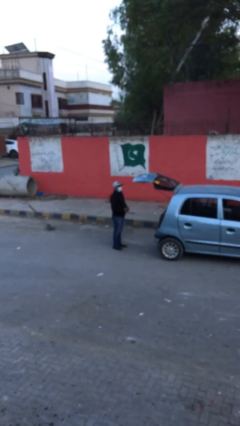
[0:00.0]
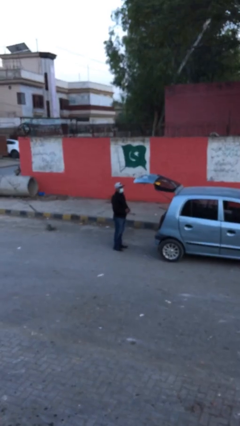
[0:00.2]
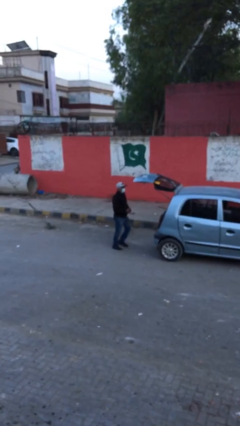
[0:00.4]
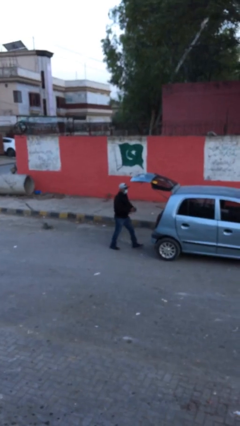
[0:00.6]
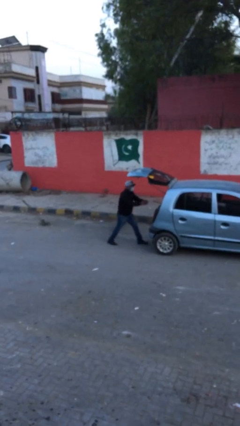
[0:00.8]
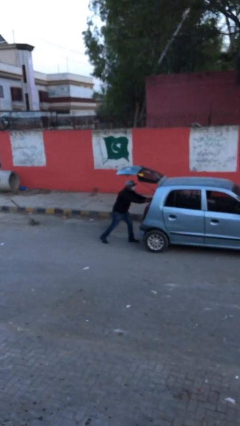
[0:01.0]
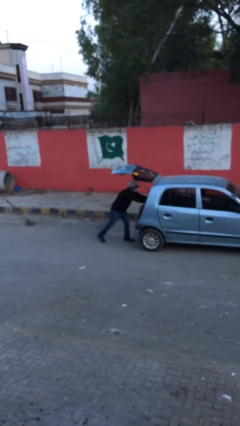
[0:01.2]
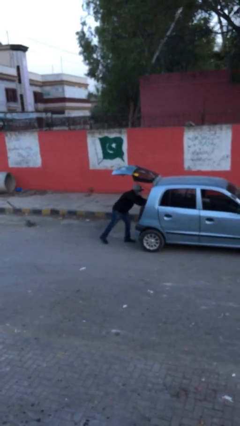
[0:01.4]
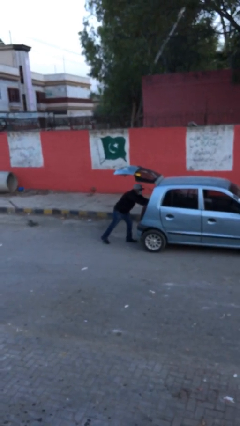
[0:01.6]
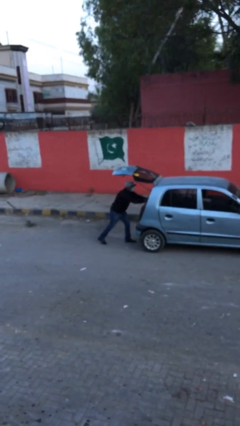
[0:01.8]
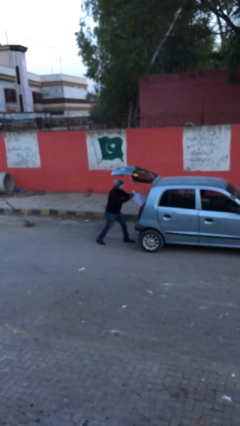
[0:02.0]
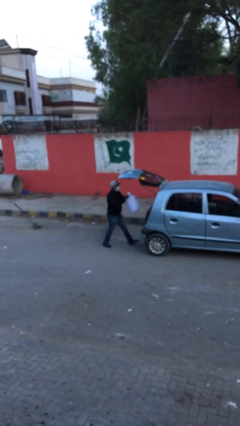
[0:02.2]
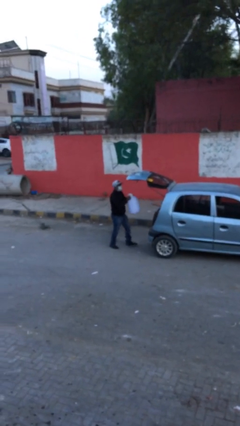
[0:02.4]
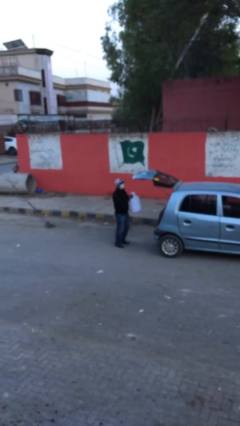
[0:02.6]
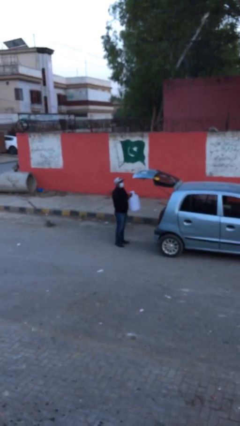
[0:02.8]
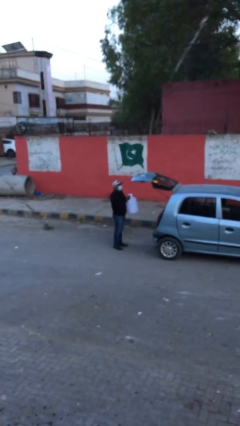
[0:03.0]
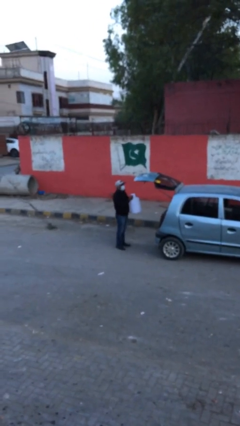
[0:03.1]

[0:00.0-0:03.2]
person unloads car

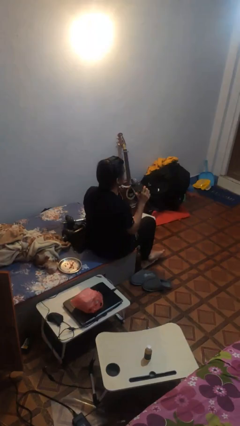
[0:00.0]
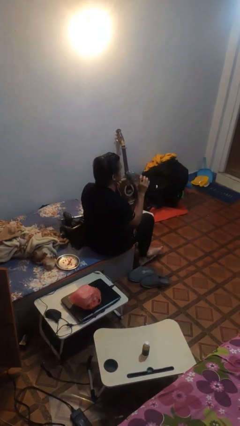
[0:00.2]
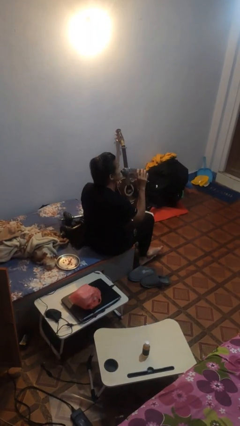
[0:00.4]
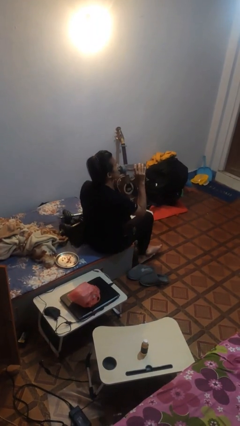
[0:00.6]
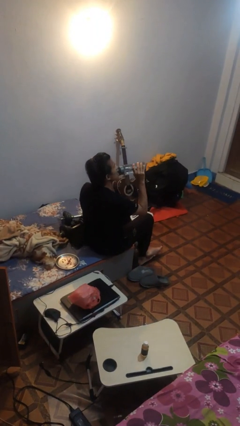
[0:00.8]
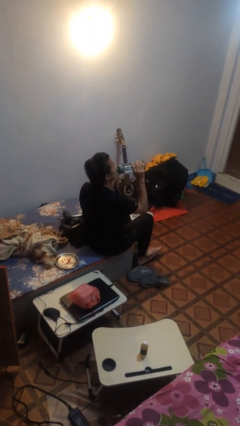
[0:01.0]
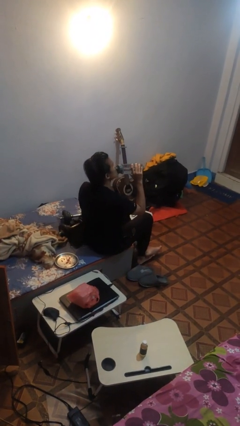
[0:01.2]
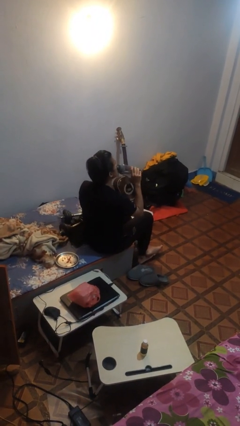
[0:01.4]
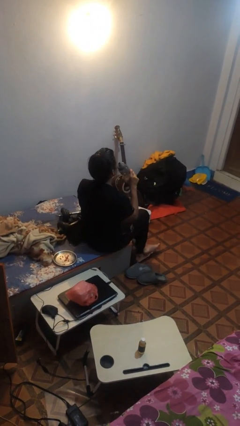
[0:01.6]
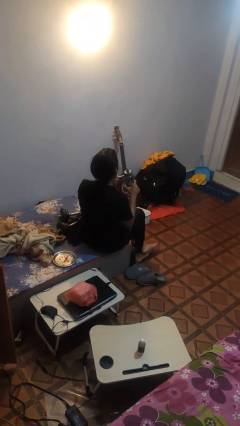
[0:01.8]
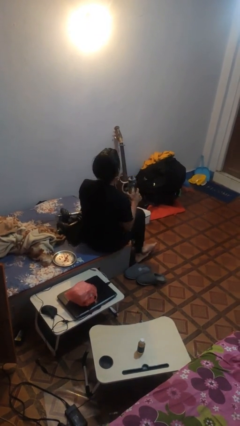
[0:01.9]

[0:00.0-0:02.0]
person drinks from bottle

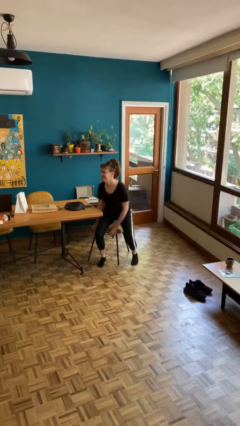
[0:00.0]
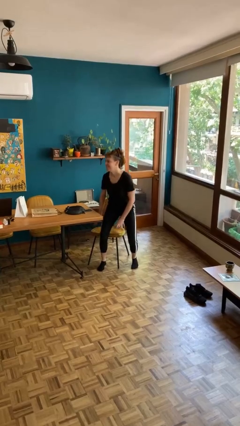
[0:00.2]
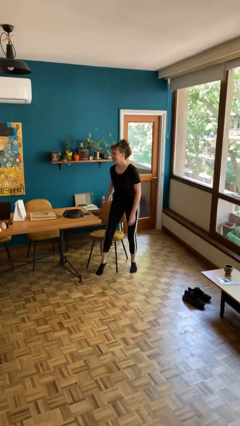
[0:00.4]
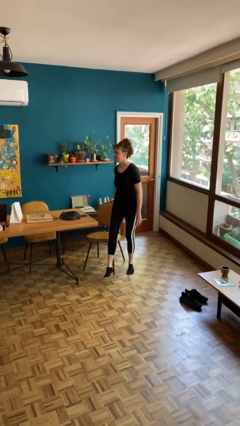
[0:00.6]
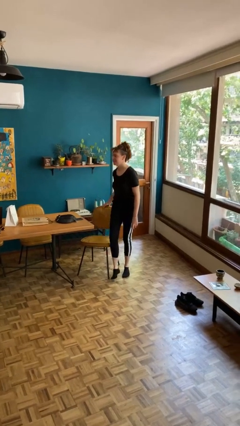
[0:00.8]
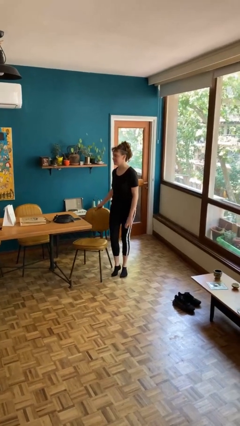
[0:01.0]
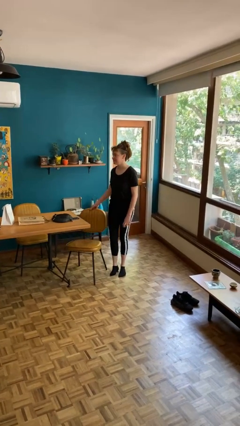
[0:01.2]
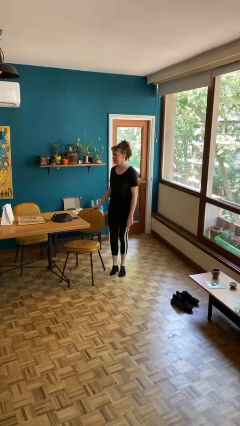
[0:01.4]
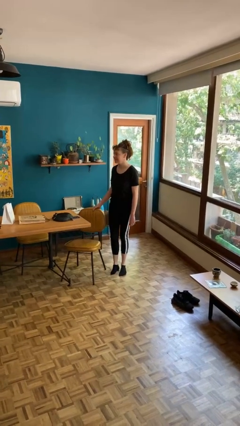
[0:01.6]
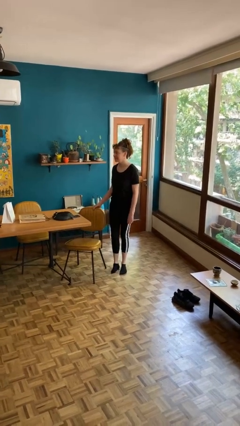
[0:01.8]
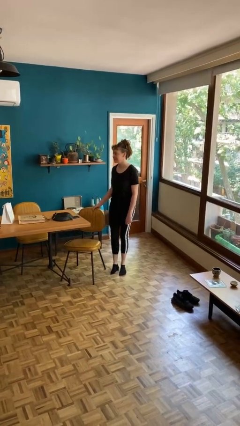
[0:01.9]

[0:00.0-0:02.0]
person stands up

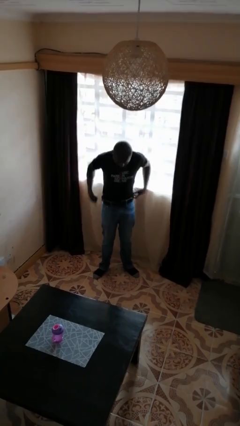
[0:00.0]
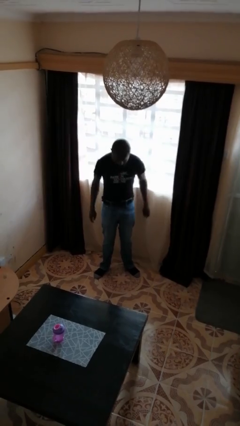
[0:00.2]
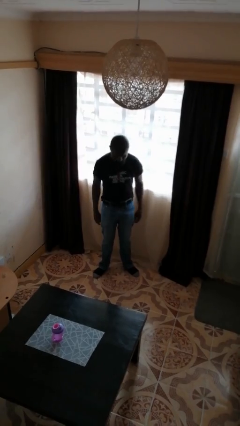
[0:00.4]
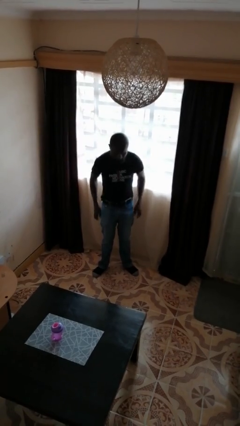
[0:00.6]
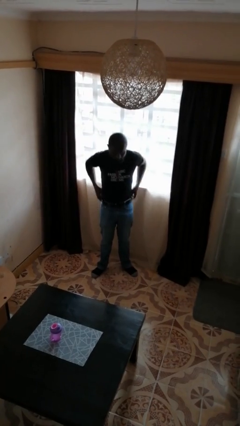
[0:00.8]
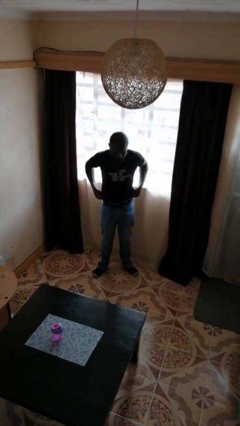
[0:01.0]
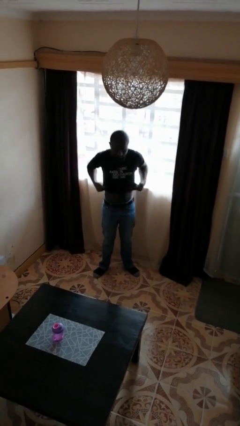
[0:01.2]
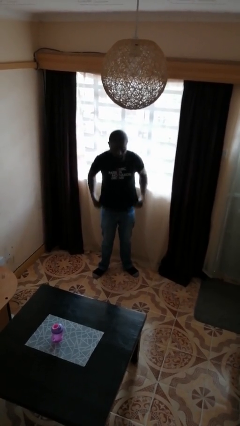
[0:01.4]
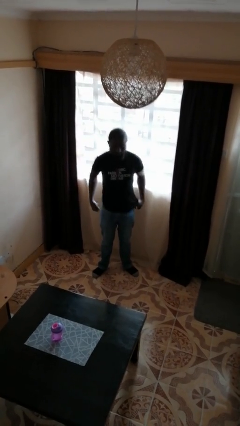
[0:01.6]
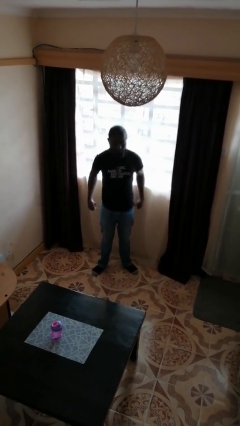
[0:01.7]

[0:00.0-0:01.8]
person untucks shirt

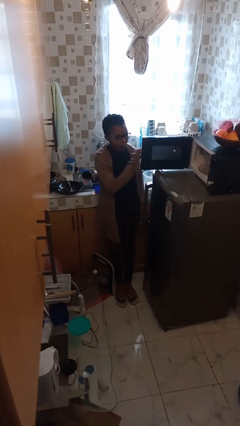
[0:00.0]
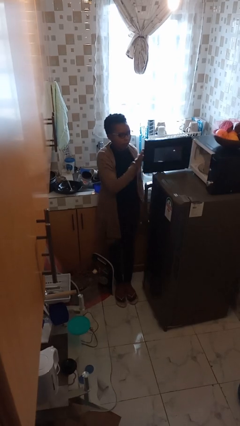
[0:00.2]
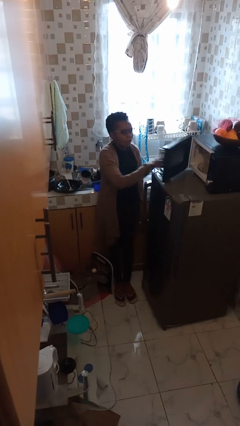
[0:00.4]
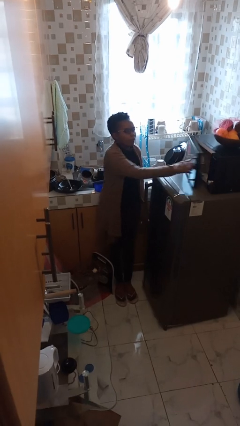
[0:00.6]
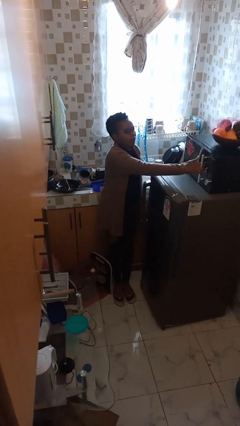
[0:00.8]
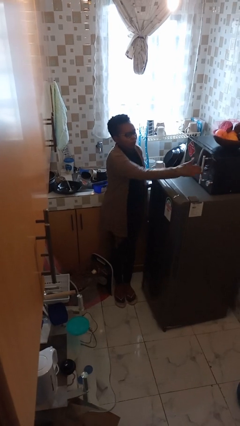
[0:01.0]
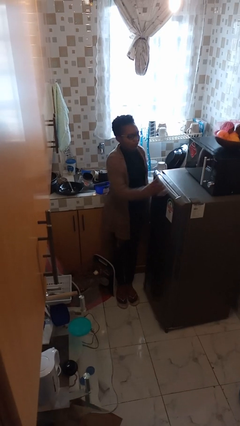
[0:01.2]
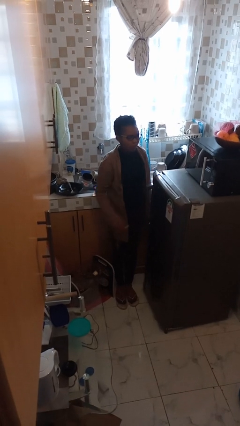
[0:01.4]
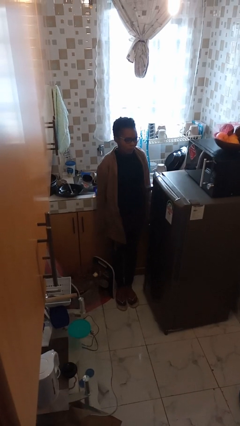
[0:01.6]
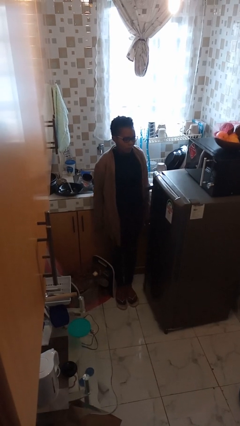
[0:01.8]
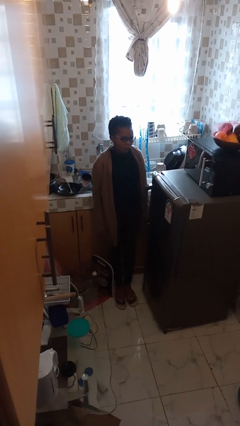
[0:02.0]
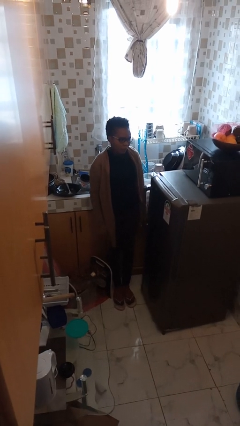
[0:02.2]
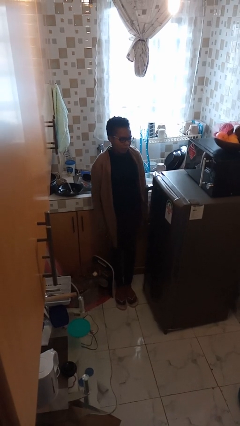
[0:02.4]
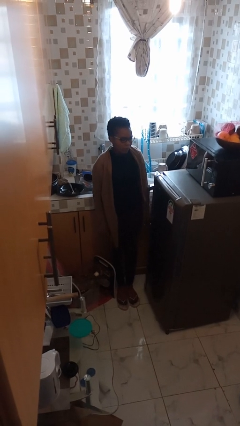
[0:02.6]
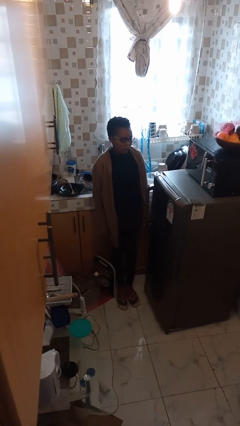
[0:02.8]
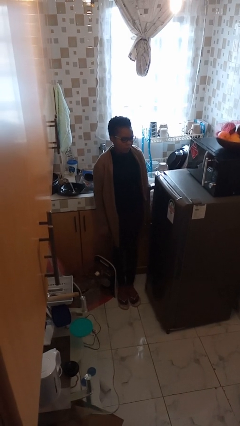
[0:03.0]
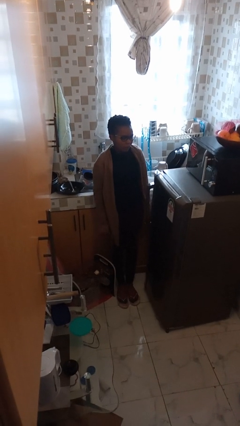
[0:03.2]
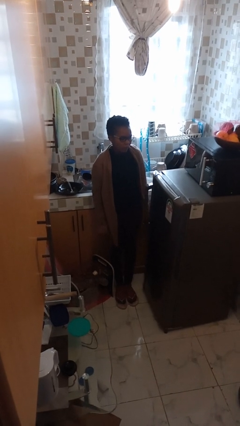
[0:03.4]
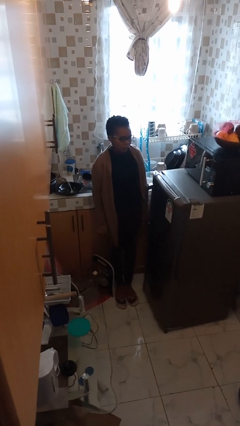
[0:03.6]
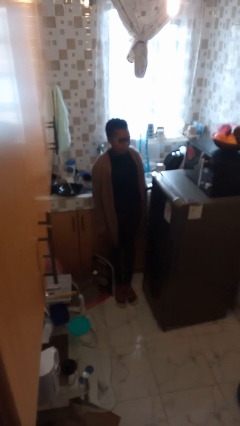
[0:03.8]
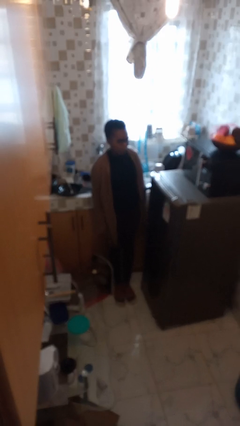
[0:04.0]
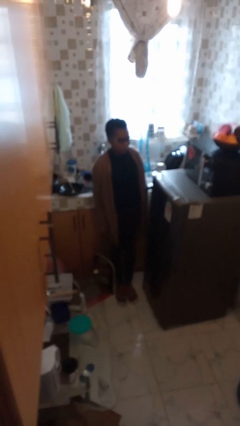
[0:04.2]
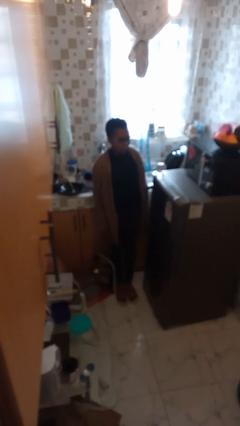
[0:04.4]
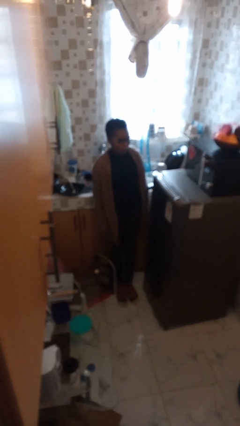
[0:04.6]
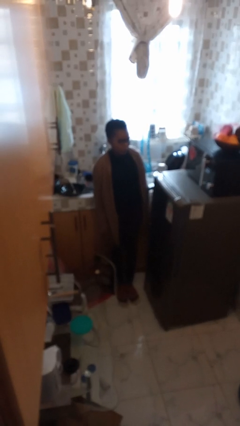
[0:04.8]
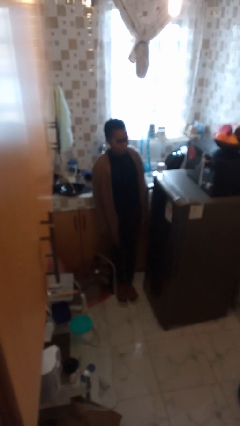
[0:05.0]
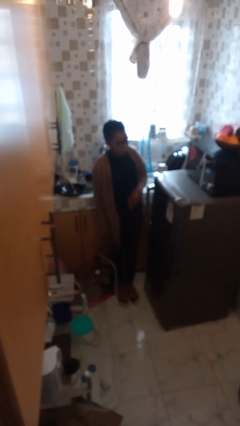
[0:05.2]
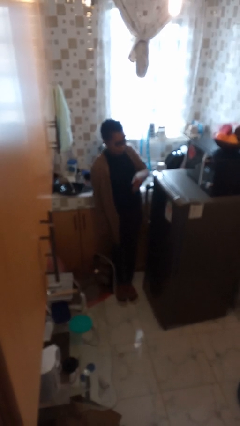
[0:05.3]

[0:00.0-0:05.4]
person closes microwave

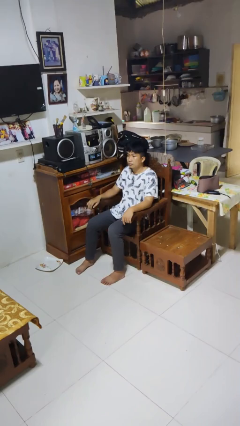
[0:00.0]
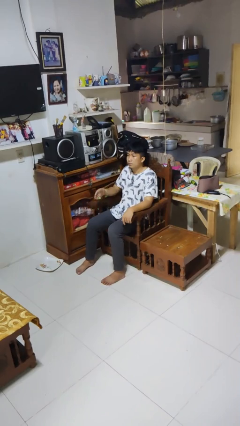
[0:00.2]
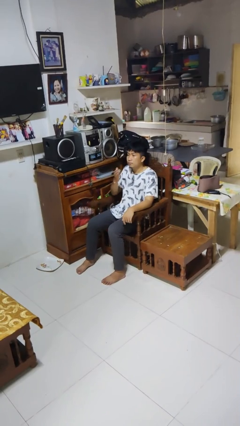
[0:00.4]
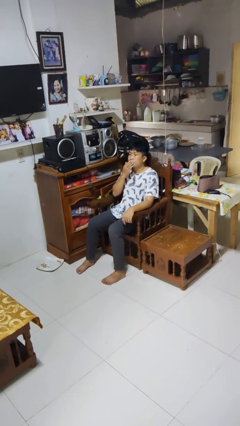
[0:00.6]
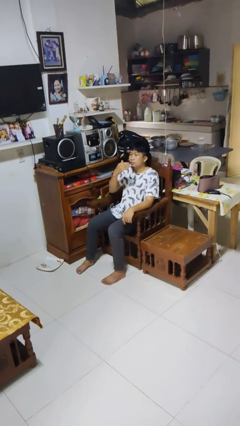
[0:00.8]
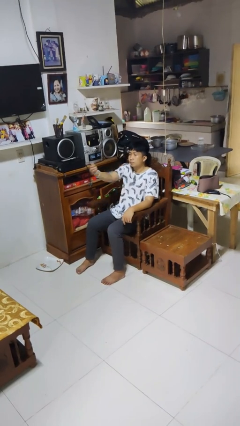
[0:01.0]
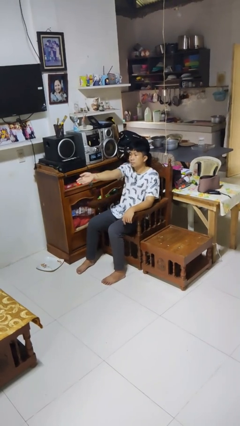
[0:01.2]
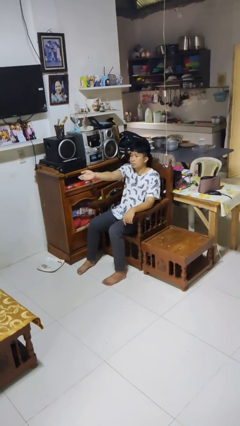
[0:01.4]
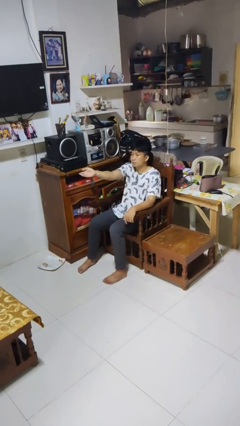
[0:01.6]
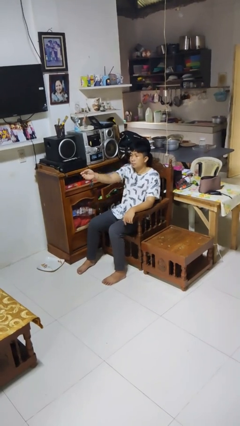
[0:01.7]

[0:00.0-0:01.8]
person gestures blow kiss

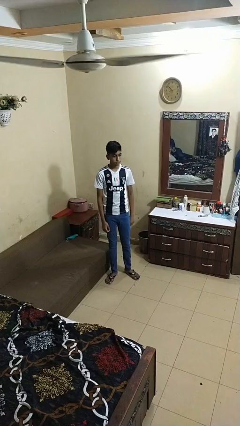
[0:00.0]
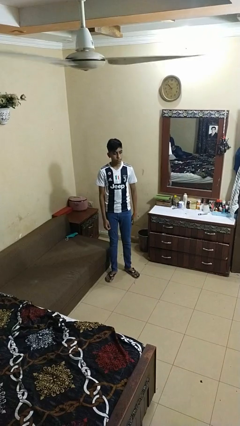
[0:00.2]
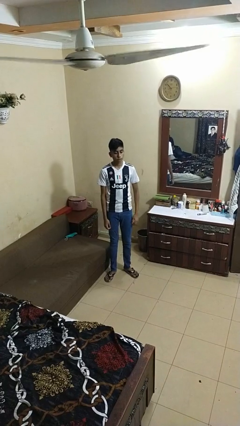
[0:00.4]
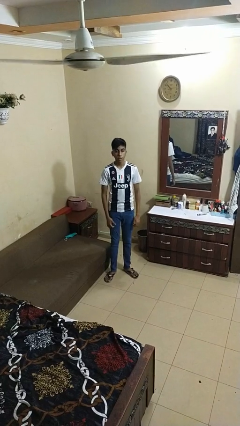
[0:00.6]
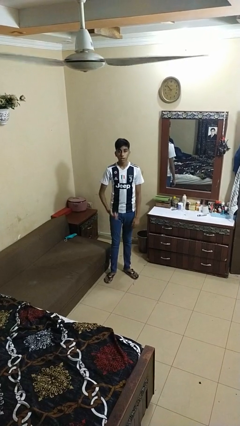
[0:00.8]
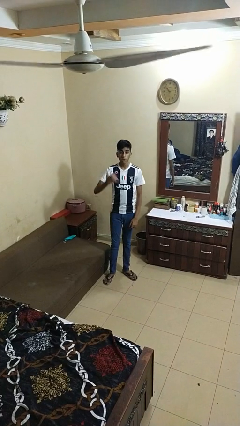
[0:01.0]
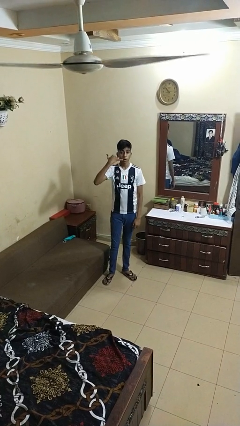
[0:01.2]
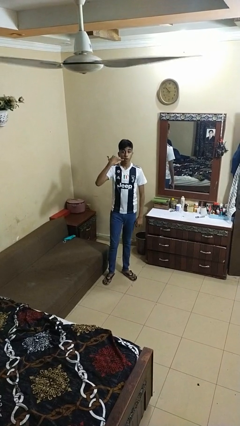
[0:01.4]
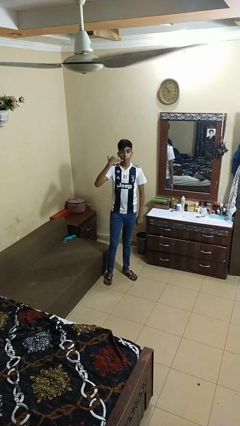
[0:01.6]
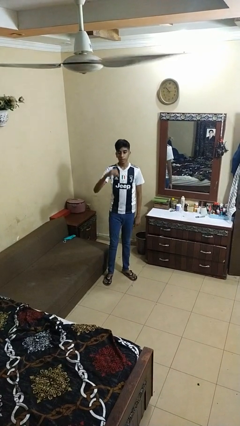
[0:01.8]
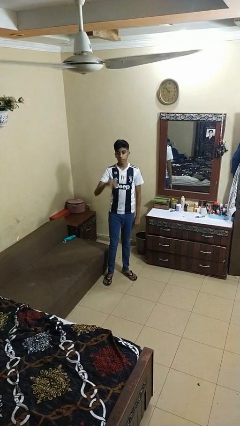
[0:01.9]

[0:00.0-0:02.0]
person gestures call me
